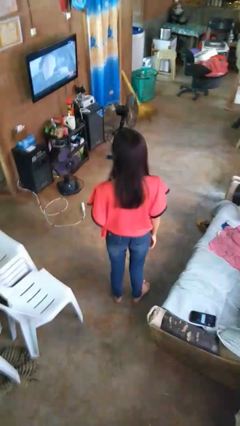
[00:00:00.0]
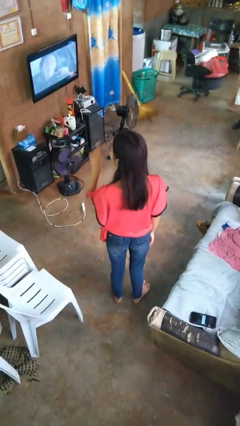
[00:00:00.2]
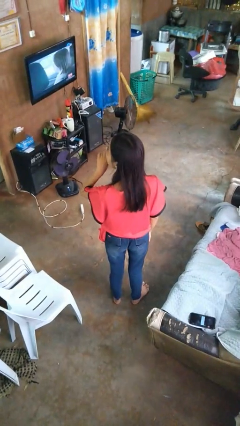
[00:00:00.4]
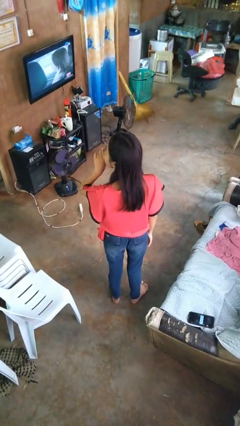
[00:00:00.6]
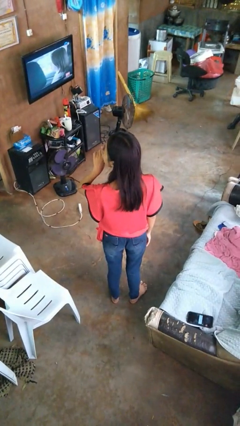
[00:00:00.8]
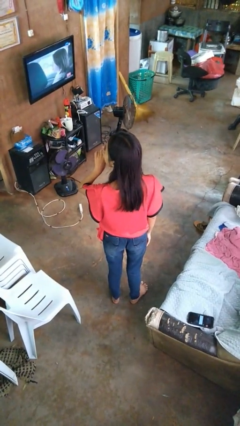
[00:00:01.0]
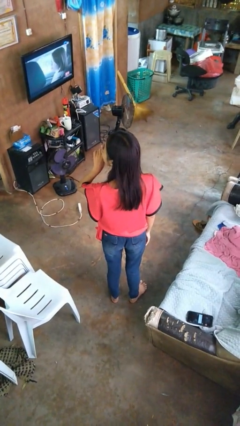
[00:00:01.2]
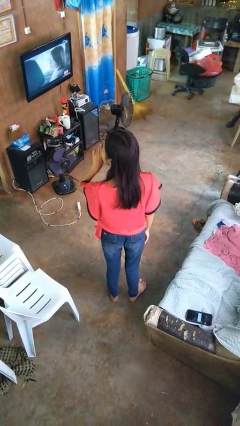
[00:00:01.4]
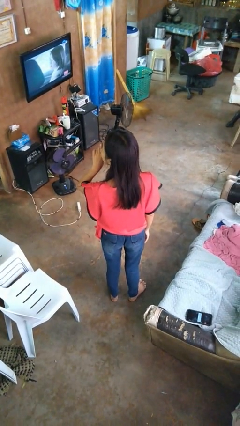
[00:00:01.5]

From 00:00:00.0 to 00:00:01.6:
person gestures be quiet

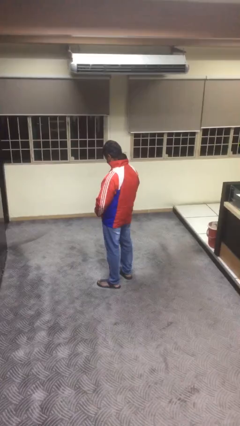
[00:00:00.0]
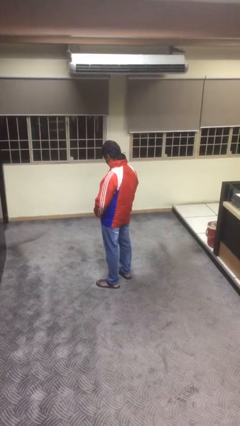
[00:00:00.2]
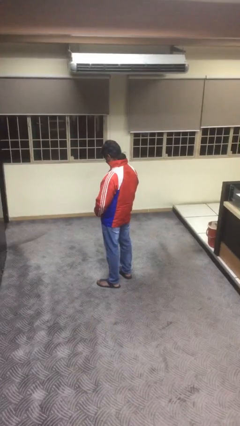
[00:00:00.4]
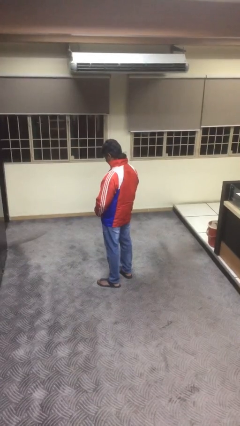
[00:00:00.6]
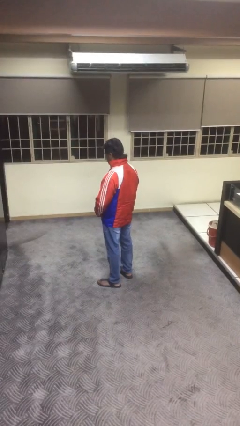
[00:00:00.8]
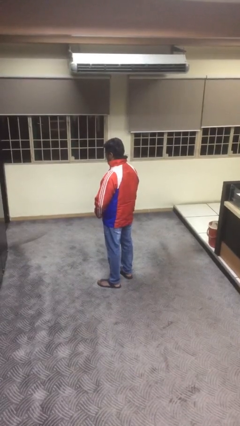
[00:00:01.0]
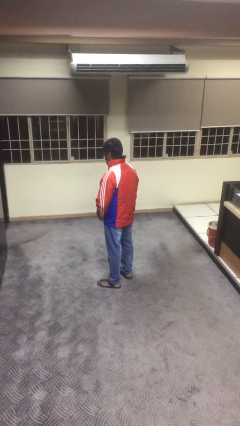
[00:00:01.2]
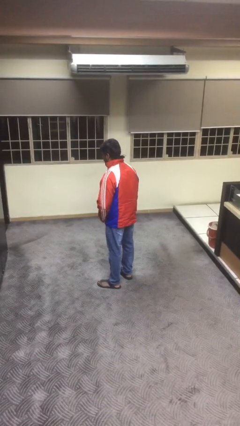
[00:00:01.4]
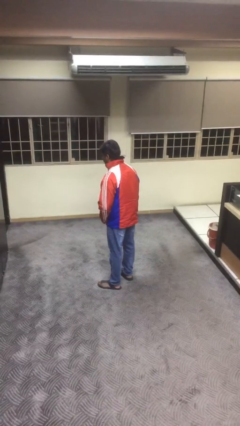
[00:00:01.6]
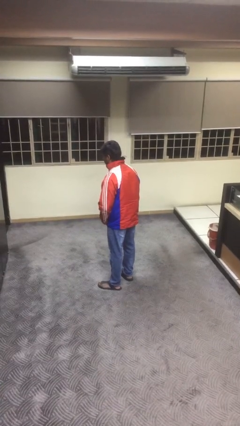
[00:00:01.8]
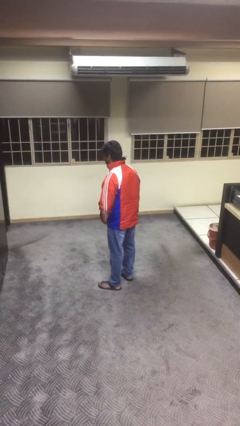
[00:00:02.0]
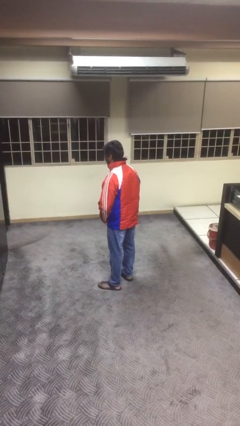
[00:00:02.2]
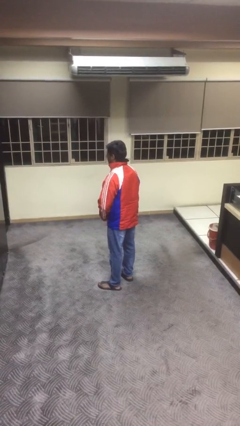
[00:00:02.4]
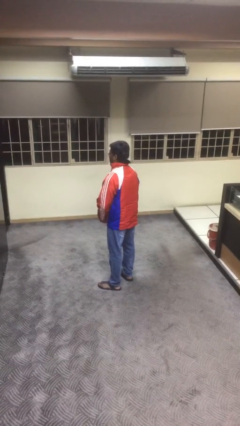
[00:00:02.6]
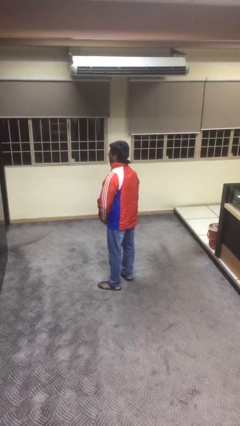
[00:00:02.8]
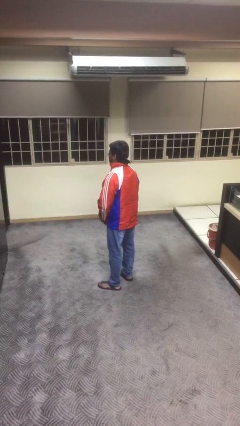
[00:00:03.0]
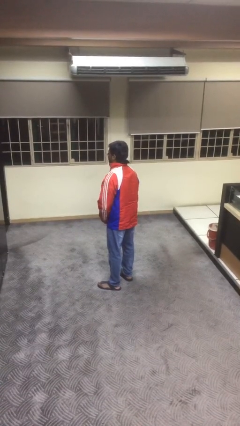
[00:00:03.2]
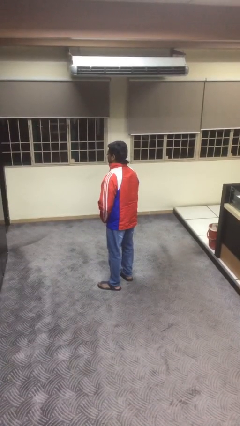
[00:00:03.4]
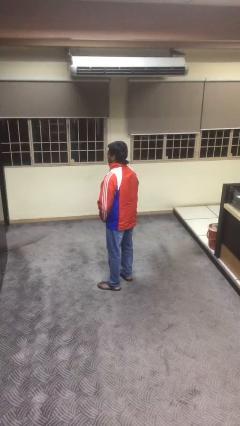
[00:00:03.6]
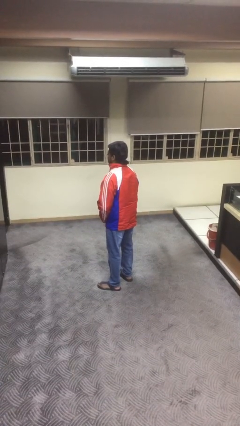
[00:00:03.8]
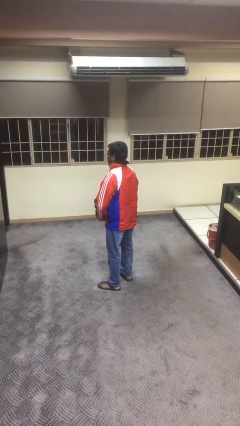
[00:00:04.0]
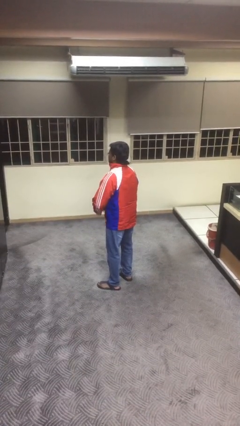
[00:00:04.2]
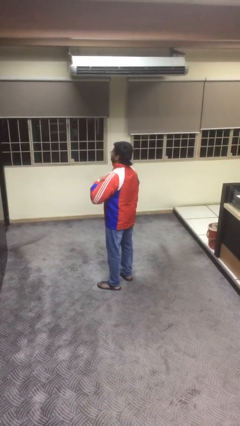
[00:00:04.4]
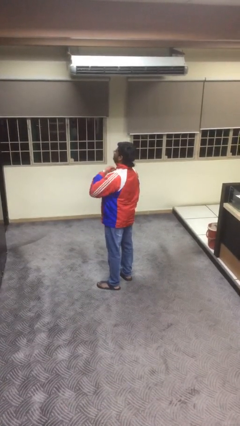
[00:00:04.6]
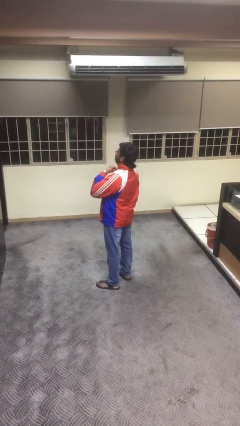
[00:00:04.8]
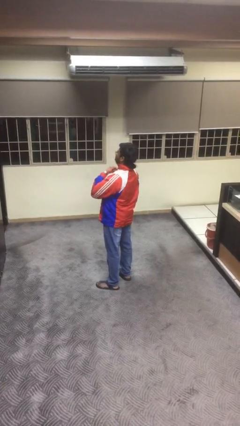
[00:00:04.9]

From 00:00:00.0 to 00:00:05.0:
person zips up jacket

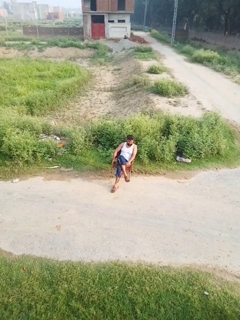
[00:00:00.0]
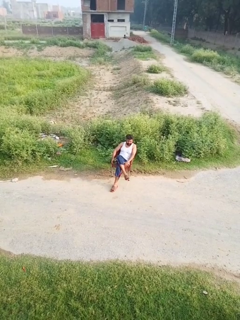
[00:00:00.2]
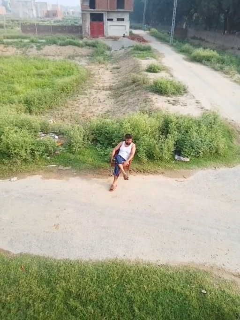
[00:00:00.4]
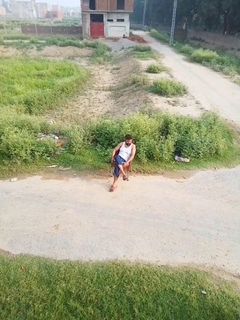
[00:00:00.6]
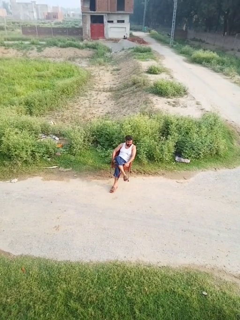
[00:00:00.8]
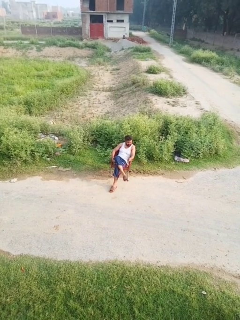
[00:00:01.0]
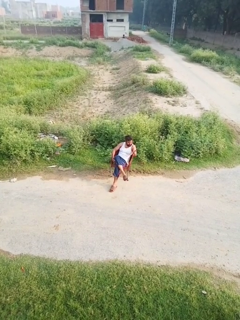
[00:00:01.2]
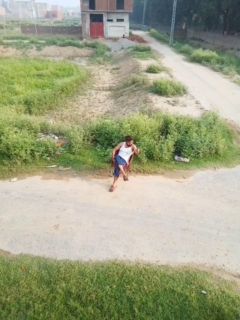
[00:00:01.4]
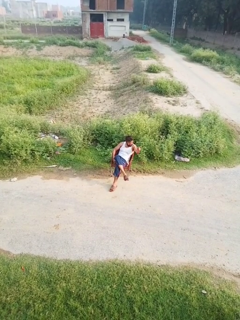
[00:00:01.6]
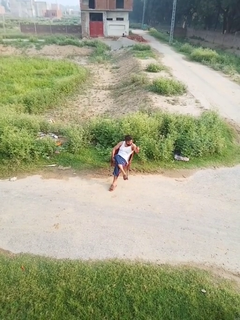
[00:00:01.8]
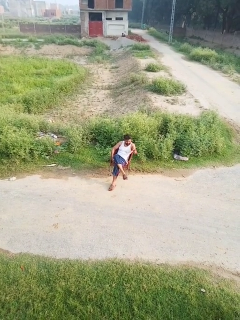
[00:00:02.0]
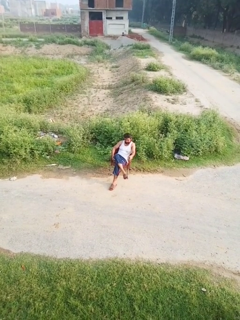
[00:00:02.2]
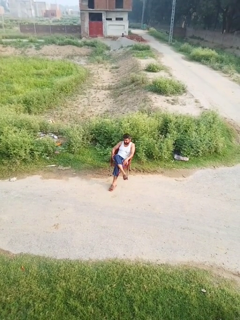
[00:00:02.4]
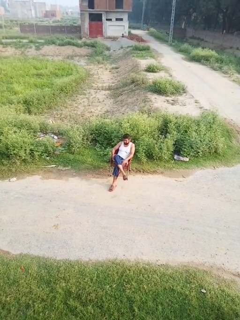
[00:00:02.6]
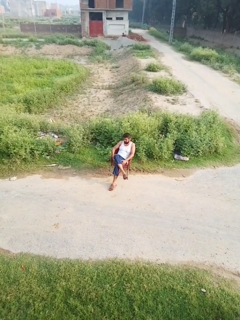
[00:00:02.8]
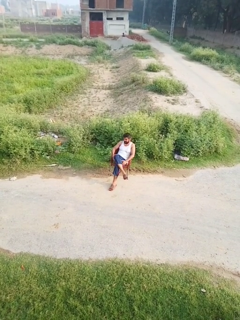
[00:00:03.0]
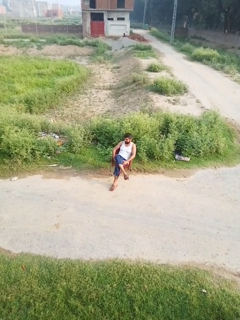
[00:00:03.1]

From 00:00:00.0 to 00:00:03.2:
person points at person

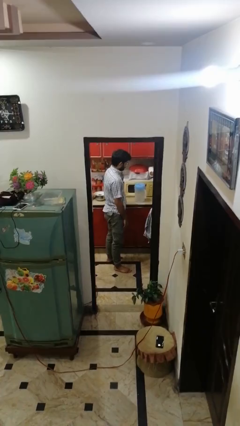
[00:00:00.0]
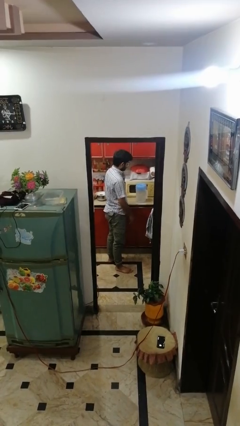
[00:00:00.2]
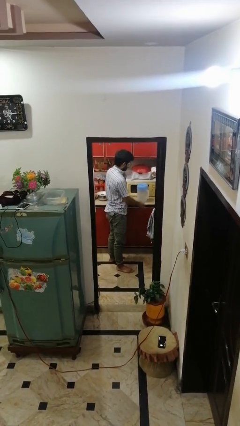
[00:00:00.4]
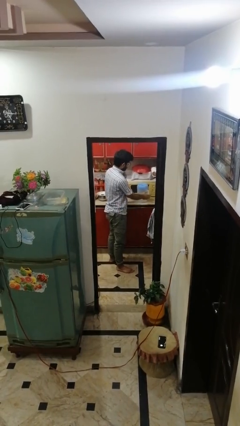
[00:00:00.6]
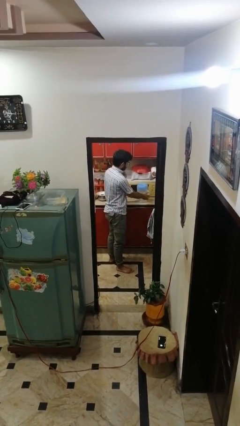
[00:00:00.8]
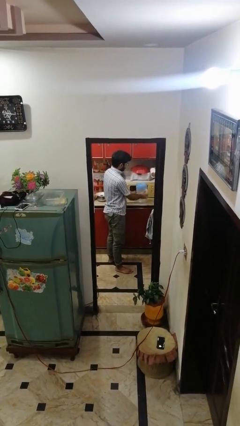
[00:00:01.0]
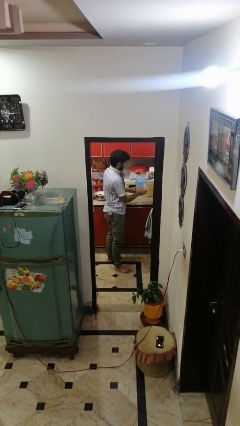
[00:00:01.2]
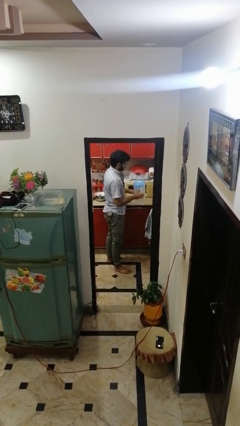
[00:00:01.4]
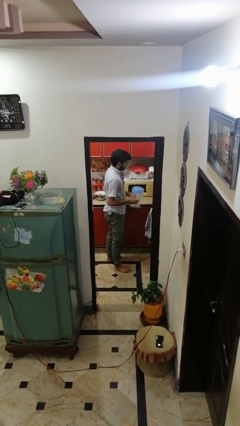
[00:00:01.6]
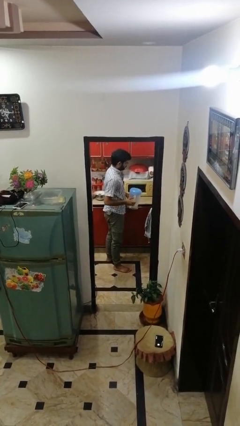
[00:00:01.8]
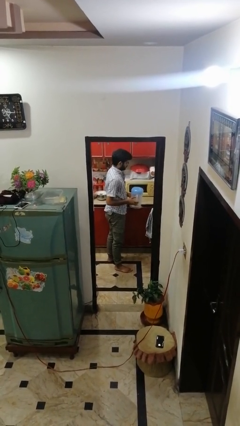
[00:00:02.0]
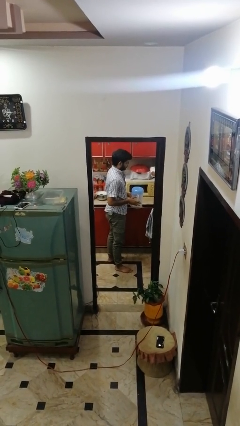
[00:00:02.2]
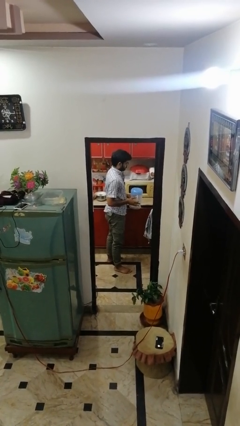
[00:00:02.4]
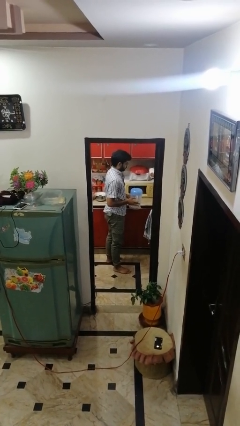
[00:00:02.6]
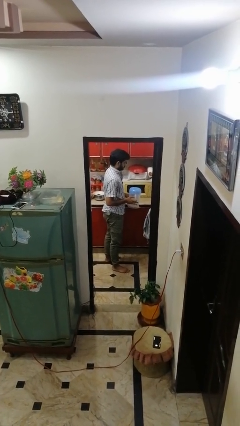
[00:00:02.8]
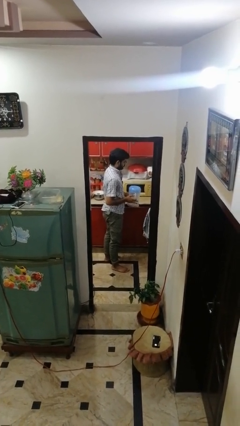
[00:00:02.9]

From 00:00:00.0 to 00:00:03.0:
person picks up object from countertop

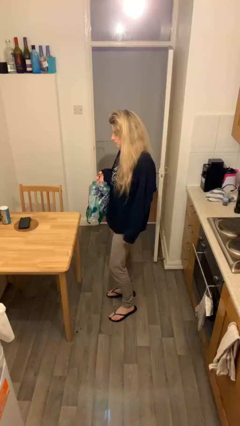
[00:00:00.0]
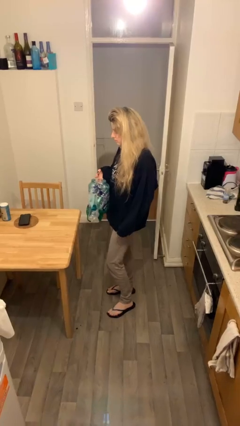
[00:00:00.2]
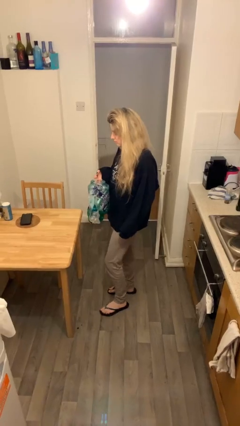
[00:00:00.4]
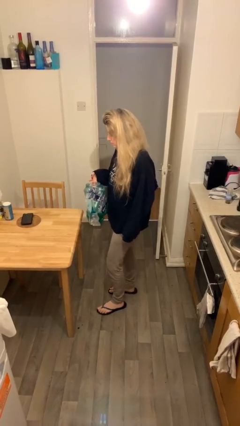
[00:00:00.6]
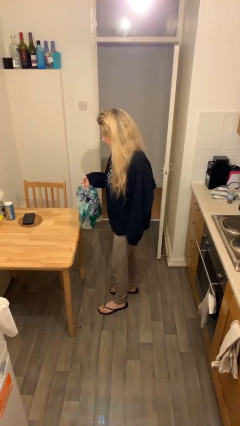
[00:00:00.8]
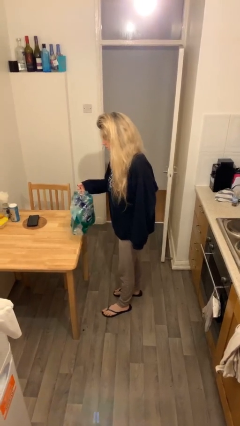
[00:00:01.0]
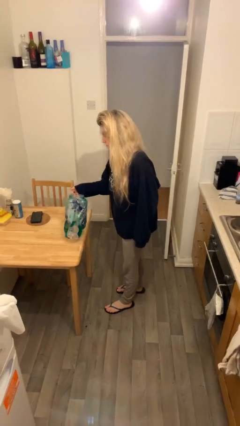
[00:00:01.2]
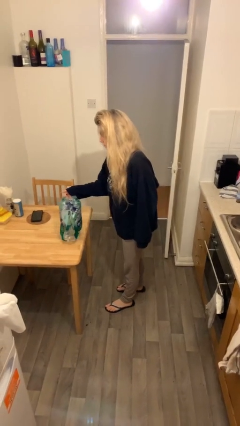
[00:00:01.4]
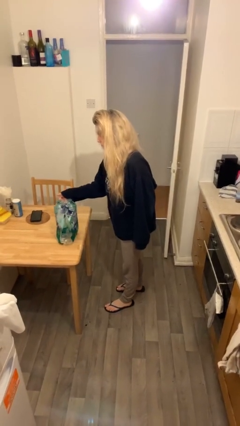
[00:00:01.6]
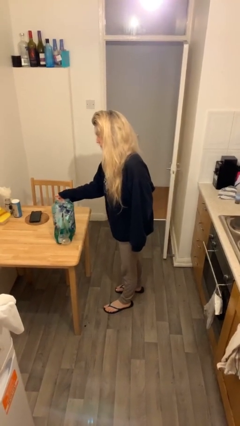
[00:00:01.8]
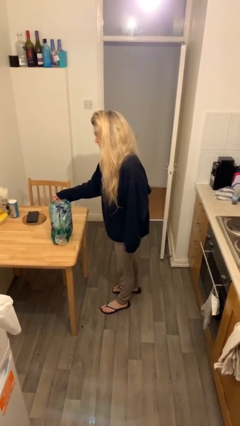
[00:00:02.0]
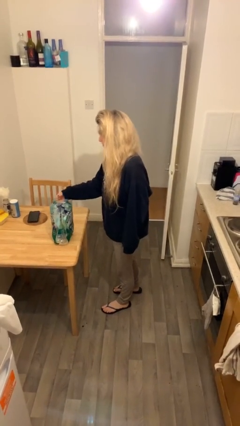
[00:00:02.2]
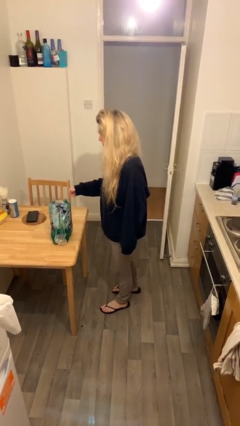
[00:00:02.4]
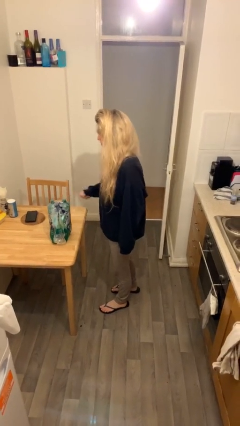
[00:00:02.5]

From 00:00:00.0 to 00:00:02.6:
person puts down object on table

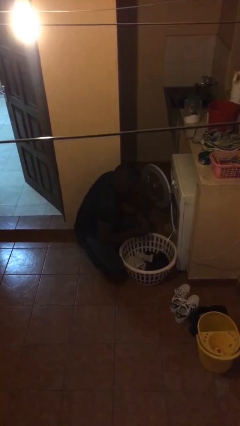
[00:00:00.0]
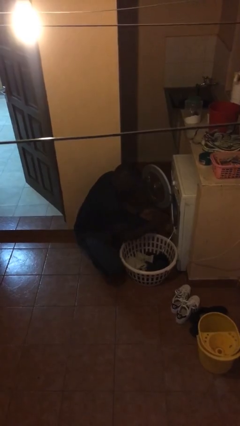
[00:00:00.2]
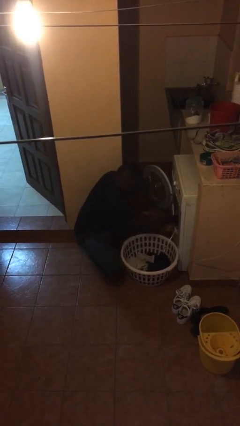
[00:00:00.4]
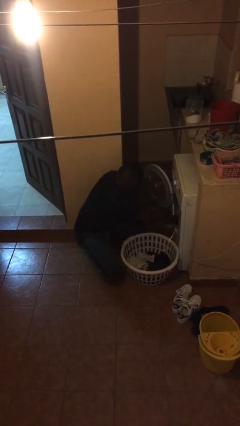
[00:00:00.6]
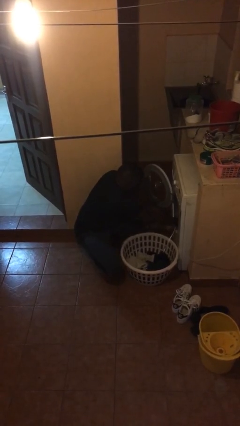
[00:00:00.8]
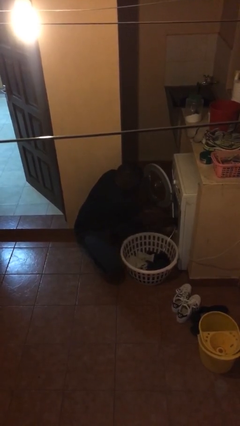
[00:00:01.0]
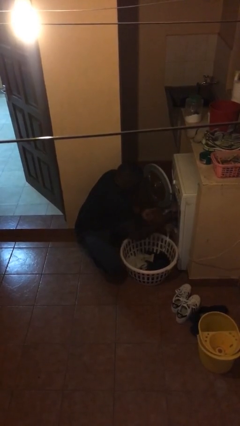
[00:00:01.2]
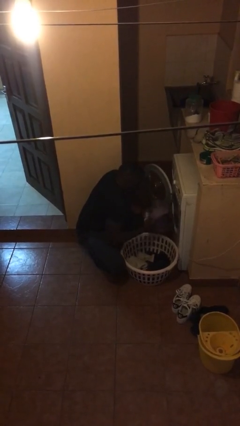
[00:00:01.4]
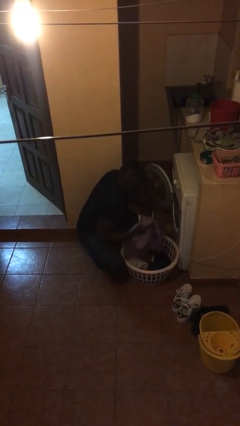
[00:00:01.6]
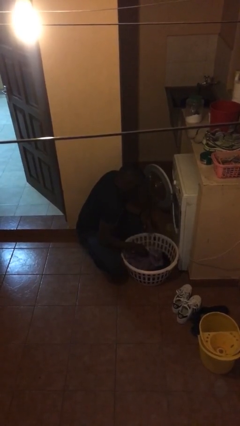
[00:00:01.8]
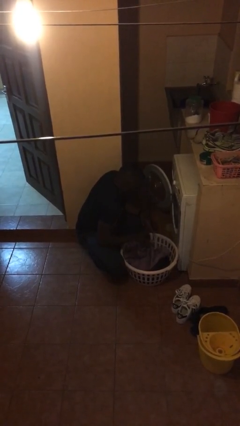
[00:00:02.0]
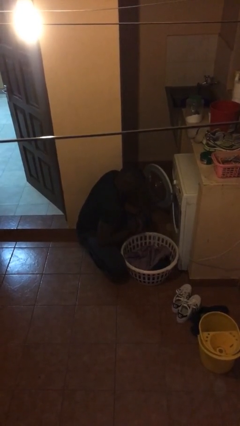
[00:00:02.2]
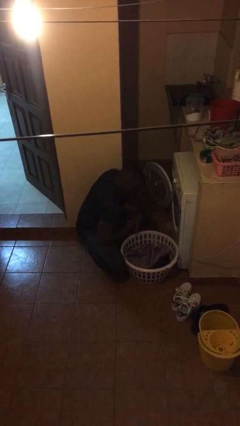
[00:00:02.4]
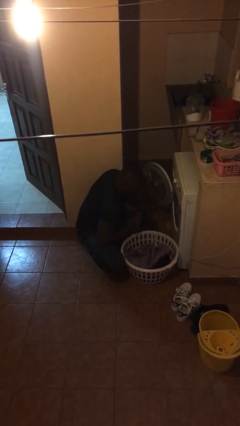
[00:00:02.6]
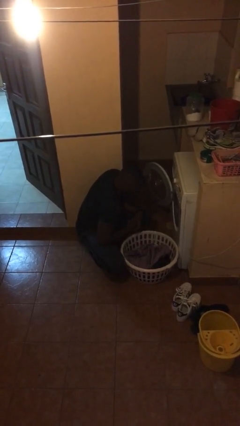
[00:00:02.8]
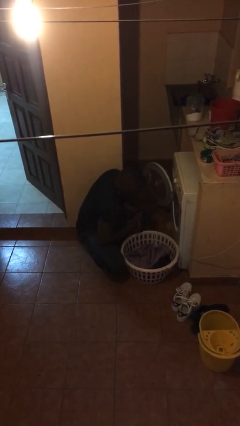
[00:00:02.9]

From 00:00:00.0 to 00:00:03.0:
person unloads clotheswasher
